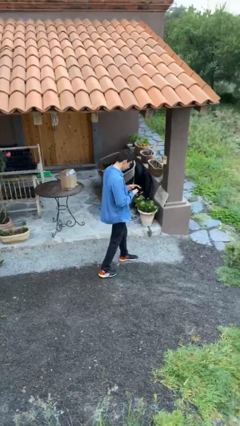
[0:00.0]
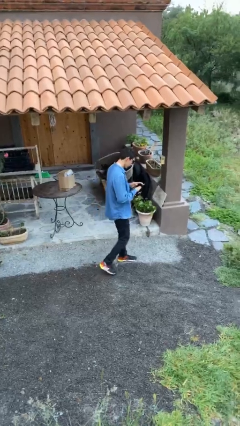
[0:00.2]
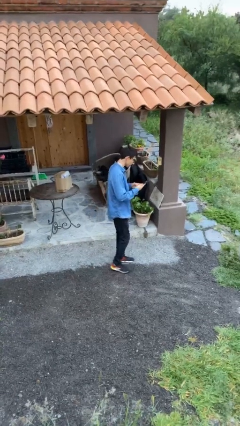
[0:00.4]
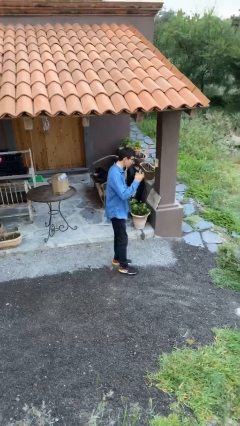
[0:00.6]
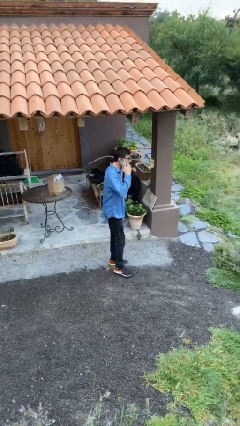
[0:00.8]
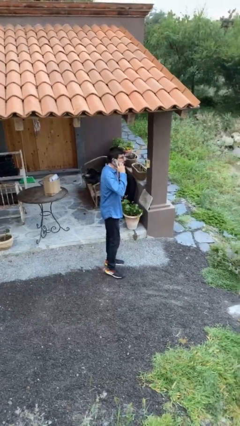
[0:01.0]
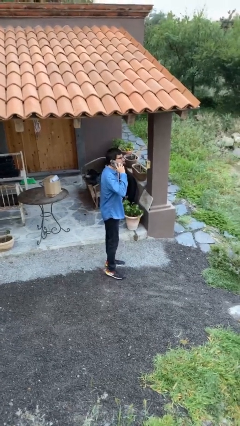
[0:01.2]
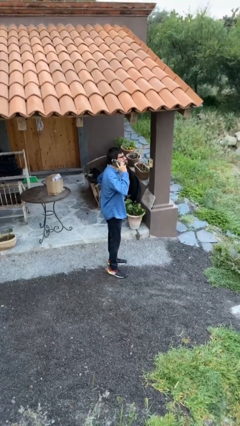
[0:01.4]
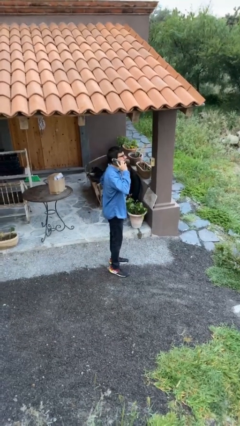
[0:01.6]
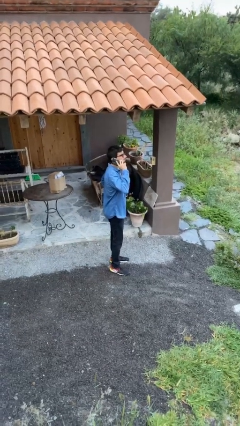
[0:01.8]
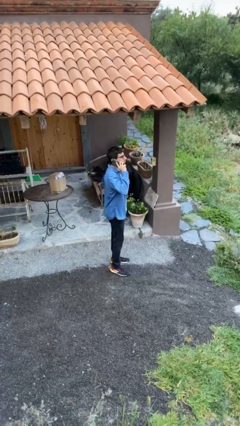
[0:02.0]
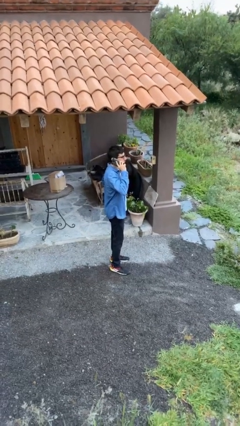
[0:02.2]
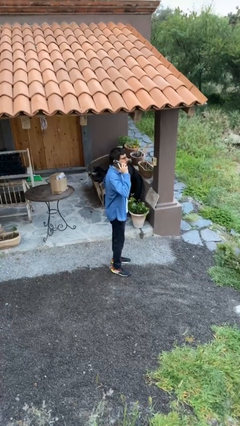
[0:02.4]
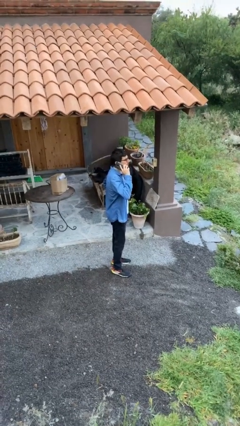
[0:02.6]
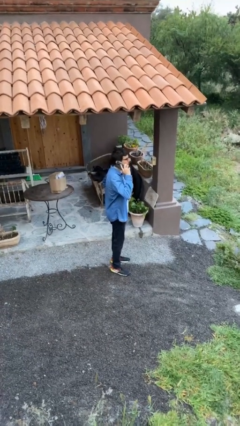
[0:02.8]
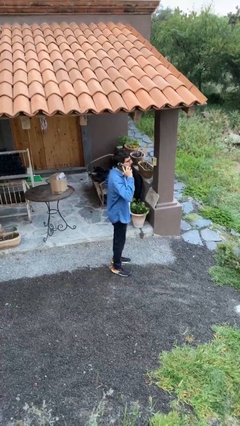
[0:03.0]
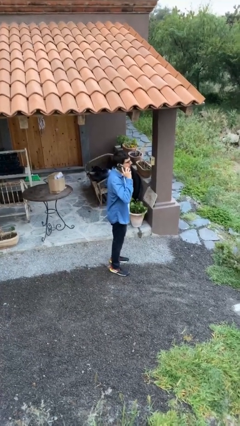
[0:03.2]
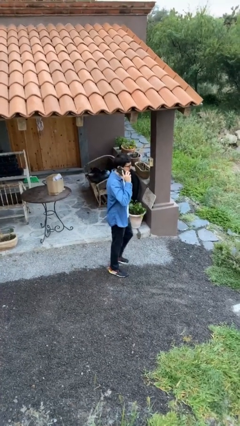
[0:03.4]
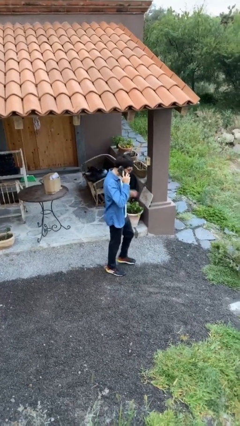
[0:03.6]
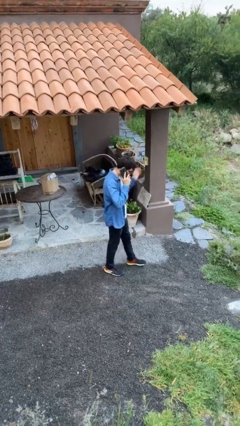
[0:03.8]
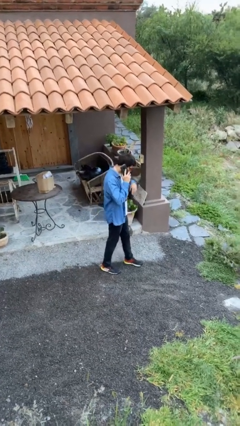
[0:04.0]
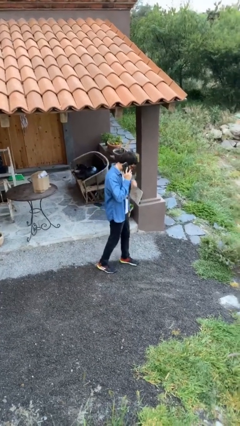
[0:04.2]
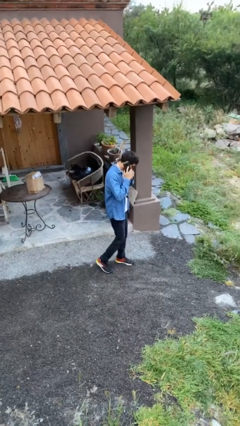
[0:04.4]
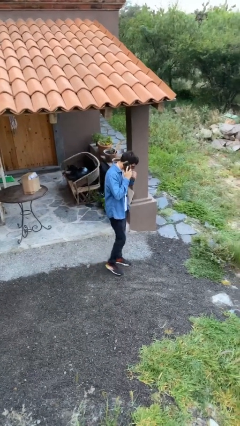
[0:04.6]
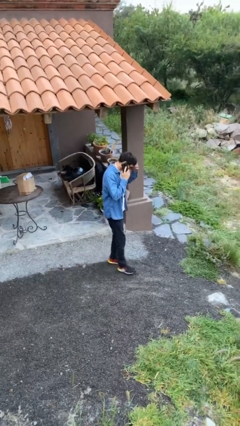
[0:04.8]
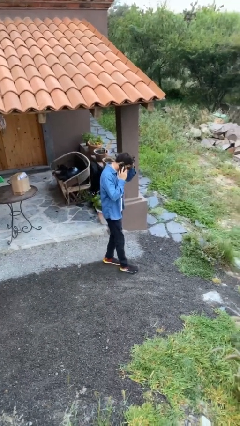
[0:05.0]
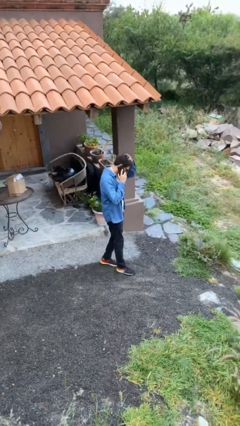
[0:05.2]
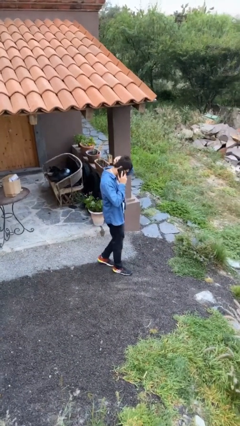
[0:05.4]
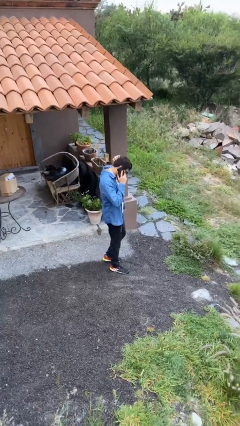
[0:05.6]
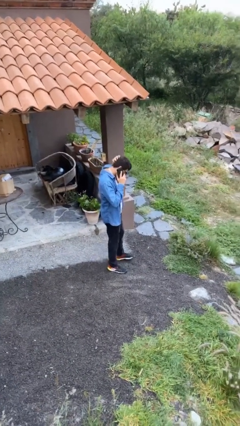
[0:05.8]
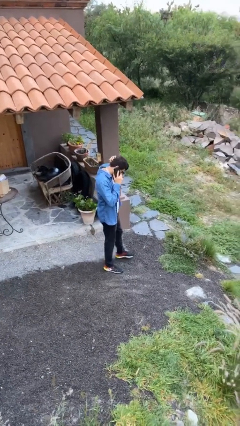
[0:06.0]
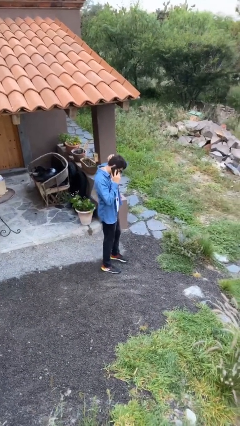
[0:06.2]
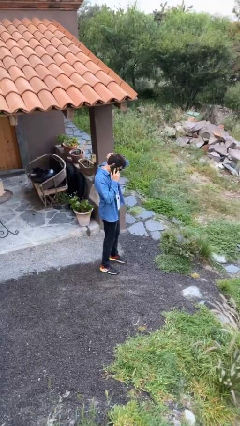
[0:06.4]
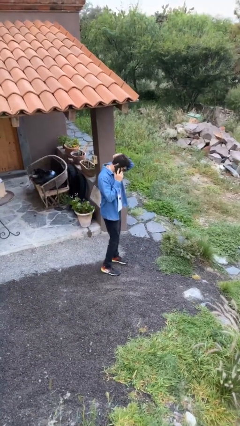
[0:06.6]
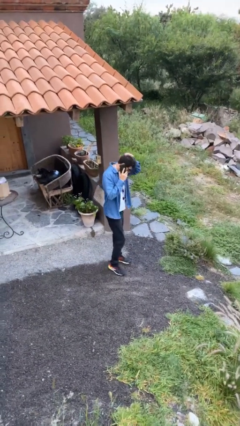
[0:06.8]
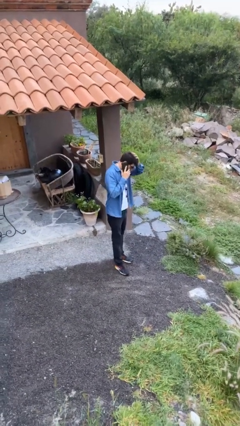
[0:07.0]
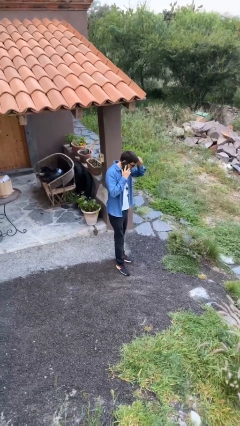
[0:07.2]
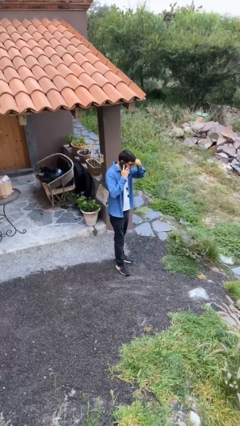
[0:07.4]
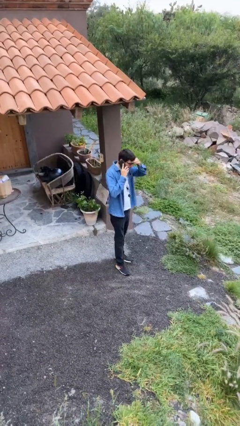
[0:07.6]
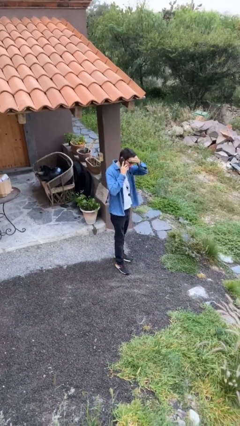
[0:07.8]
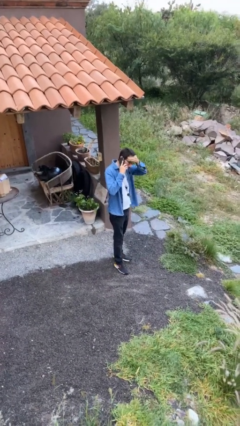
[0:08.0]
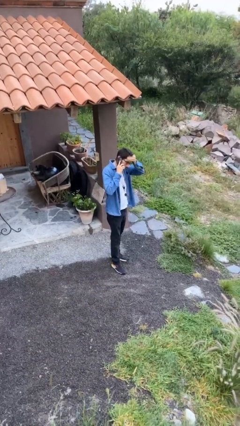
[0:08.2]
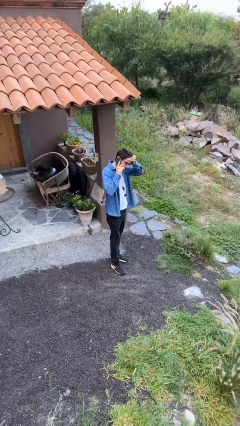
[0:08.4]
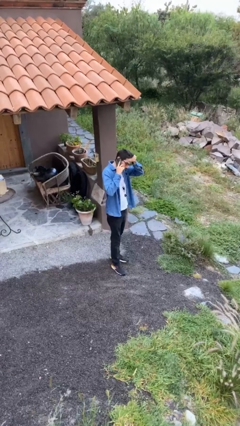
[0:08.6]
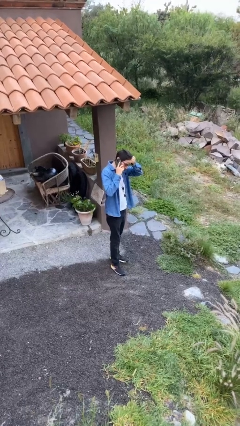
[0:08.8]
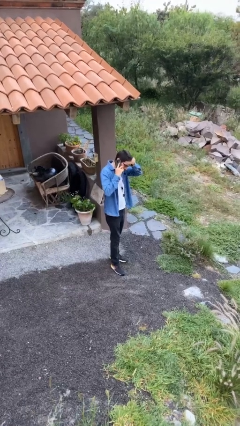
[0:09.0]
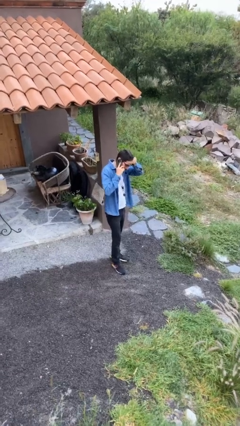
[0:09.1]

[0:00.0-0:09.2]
person talks on phone

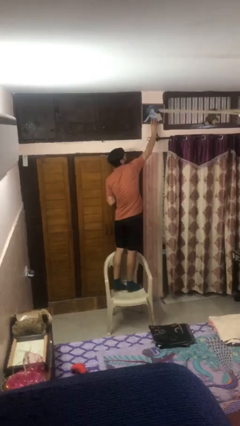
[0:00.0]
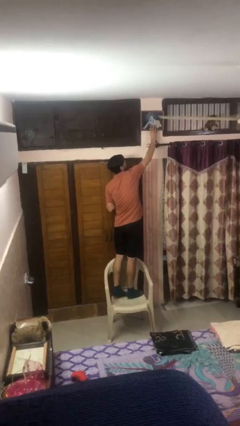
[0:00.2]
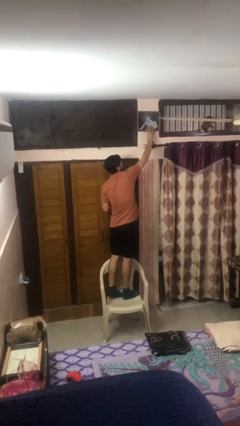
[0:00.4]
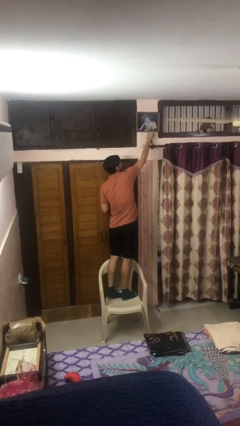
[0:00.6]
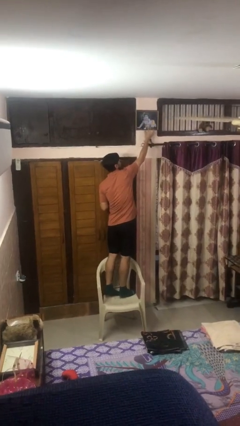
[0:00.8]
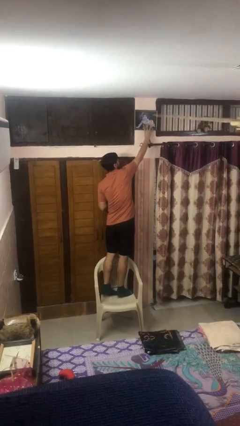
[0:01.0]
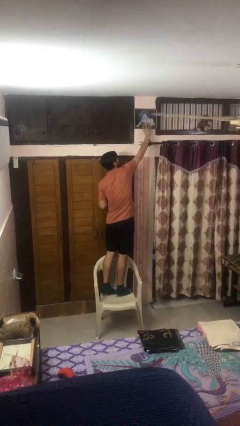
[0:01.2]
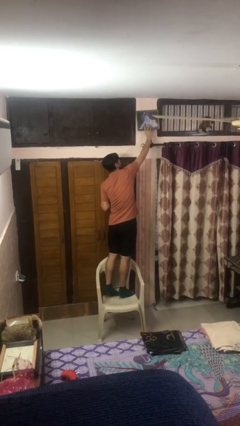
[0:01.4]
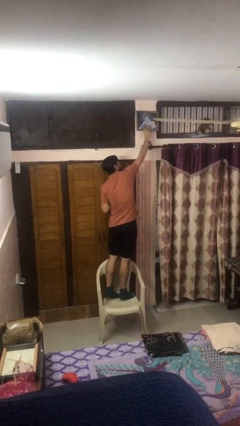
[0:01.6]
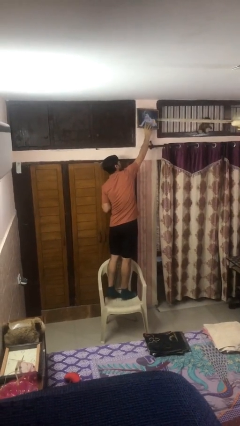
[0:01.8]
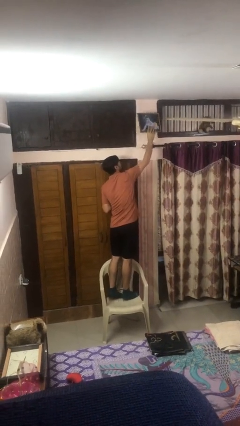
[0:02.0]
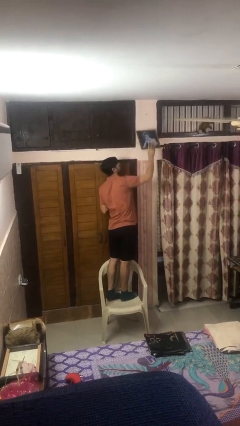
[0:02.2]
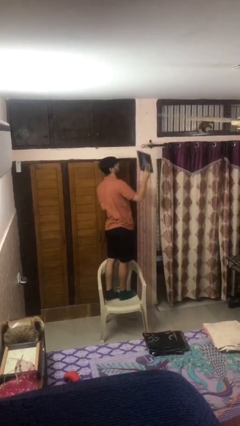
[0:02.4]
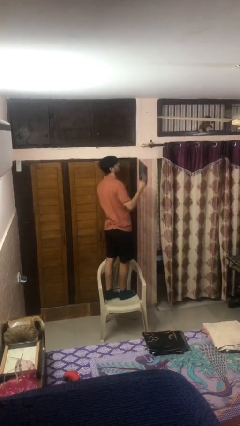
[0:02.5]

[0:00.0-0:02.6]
person takes down picture frame

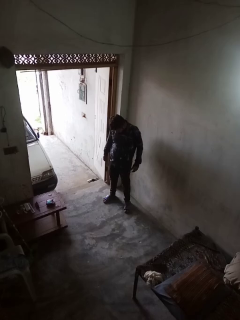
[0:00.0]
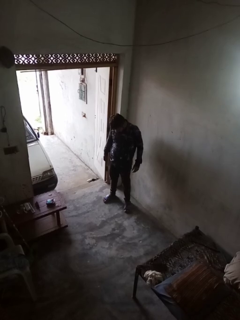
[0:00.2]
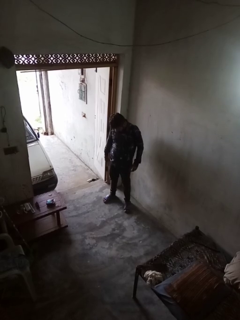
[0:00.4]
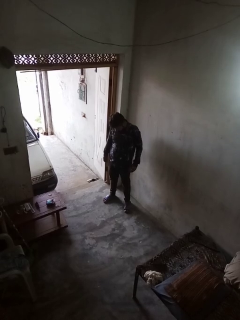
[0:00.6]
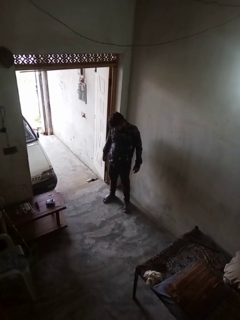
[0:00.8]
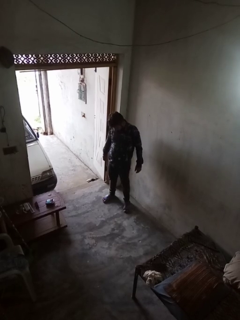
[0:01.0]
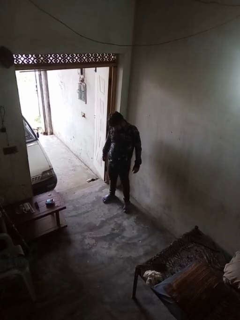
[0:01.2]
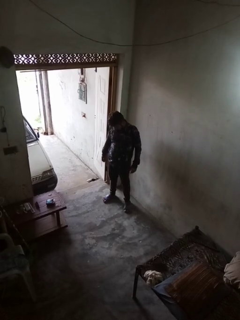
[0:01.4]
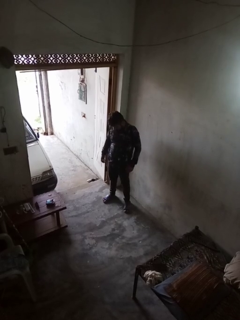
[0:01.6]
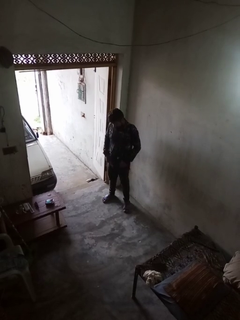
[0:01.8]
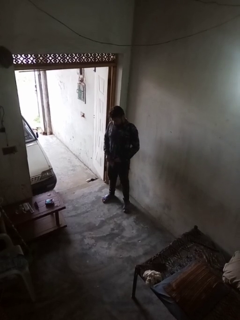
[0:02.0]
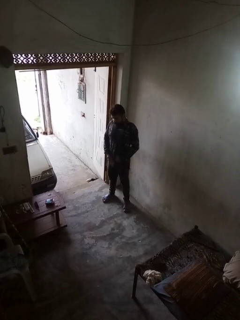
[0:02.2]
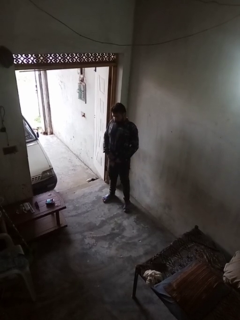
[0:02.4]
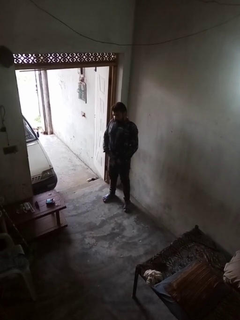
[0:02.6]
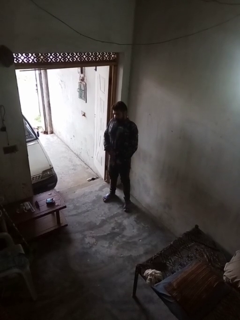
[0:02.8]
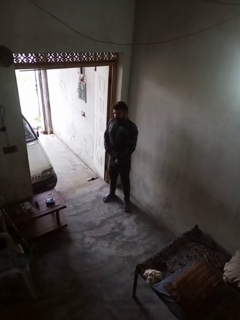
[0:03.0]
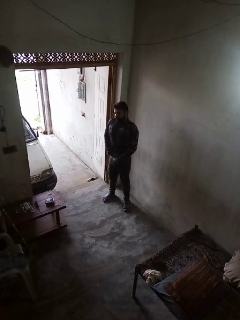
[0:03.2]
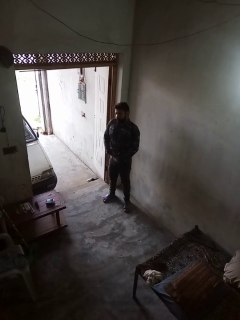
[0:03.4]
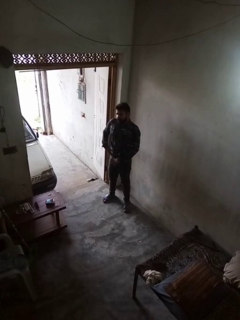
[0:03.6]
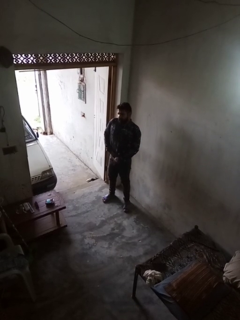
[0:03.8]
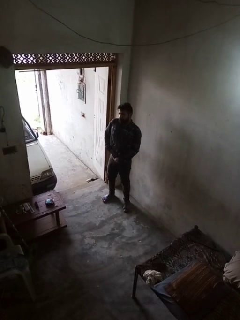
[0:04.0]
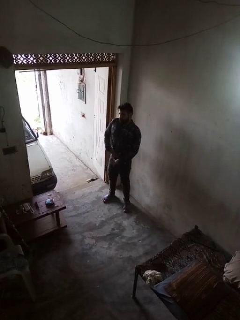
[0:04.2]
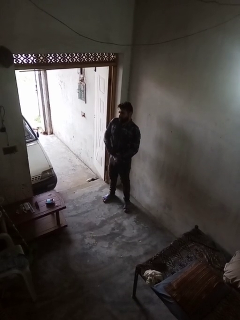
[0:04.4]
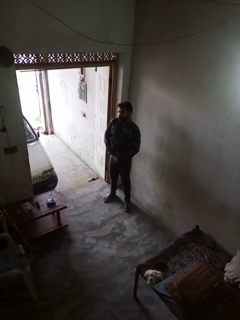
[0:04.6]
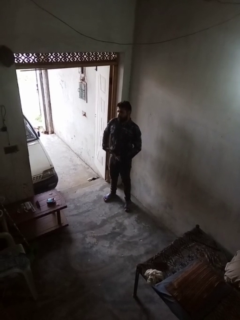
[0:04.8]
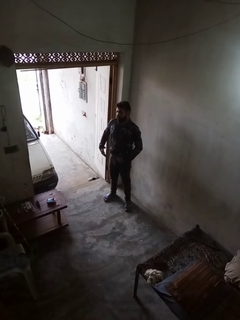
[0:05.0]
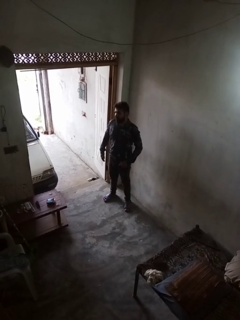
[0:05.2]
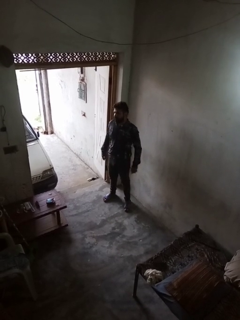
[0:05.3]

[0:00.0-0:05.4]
person tucks in shirt

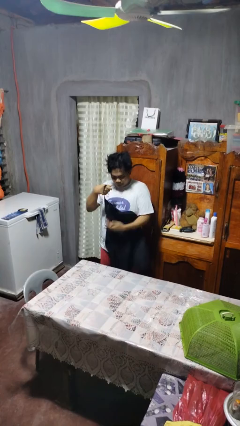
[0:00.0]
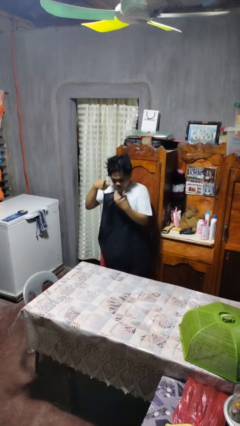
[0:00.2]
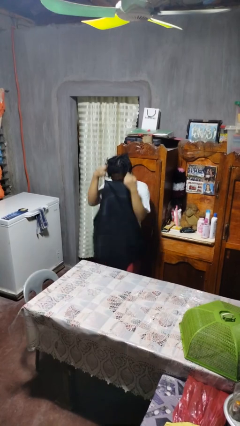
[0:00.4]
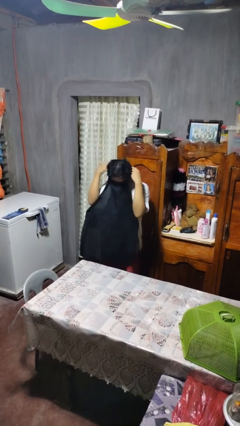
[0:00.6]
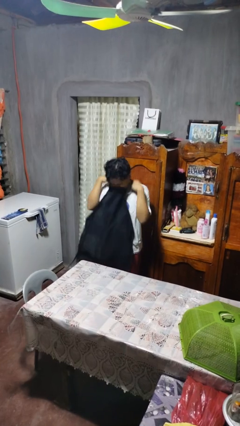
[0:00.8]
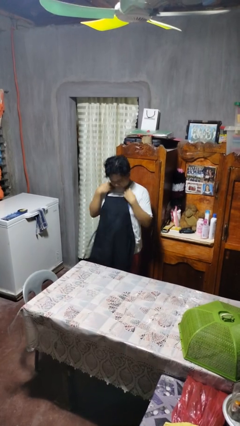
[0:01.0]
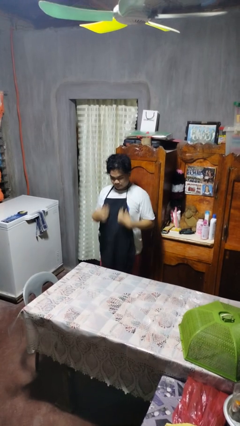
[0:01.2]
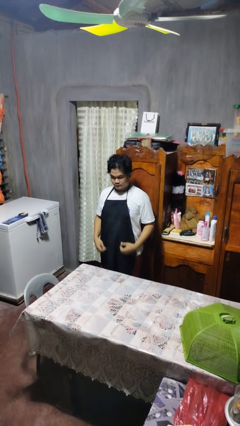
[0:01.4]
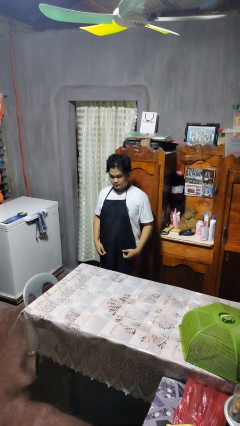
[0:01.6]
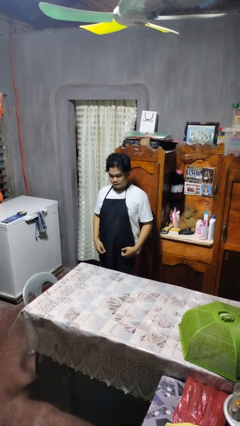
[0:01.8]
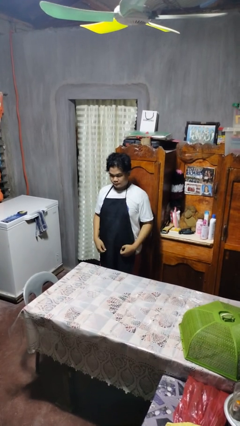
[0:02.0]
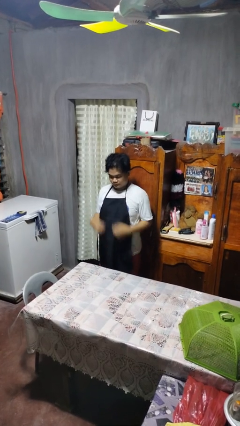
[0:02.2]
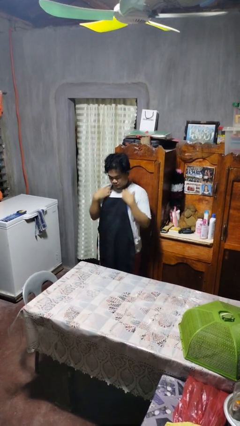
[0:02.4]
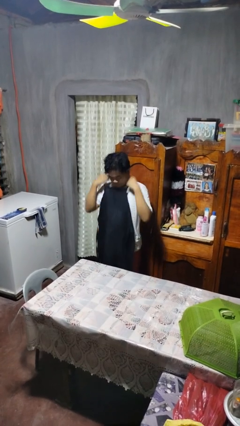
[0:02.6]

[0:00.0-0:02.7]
person puts on apron
